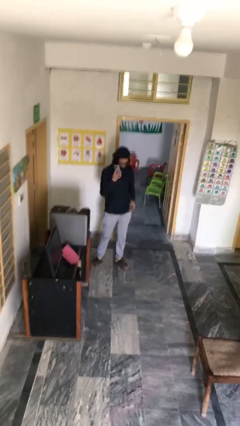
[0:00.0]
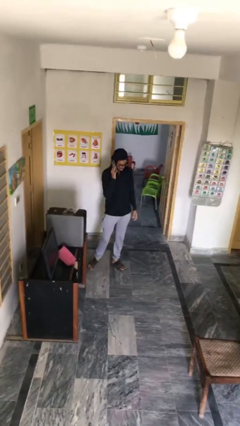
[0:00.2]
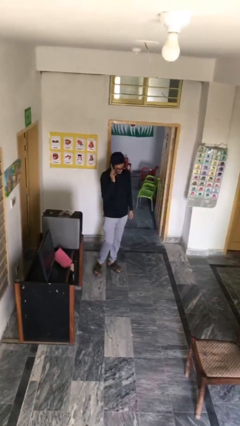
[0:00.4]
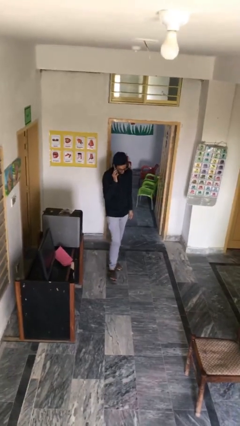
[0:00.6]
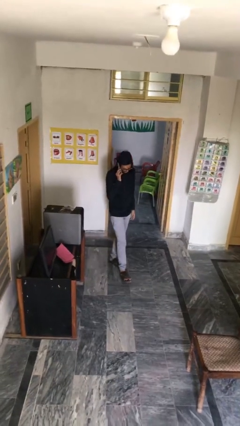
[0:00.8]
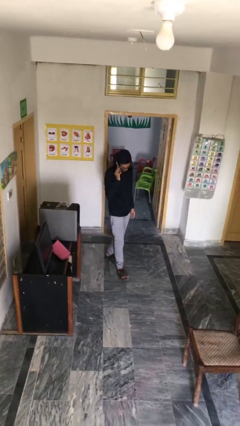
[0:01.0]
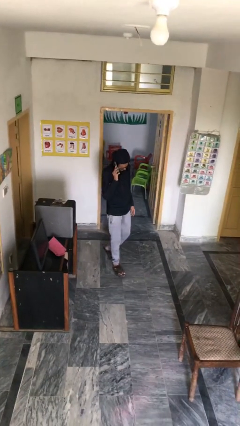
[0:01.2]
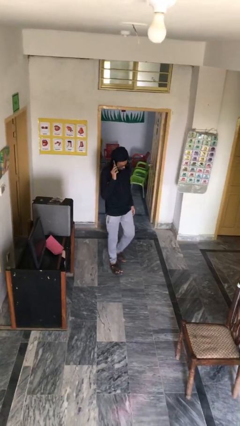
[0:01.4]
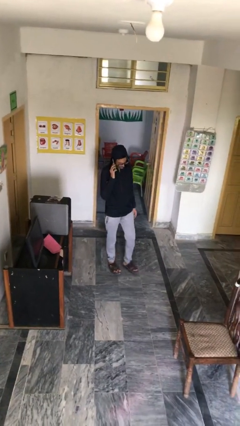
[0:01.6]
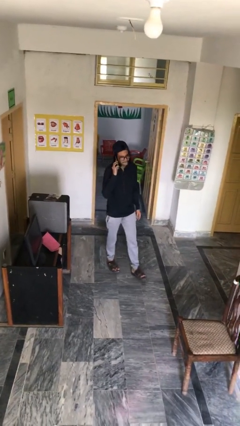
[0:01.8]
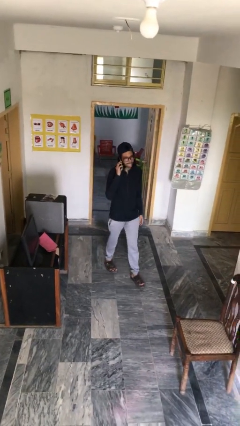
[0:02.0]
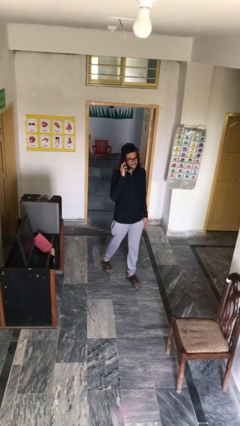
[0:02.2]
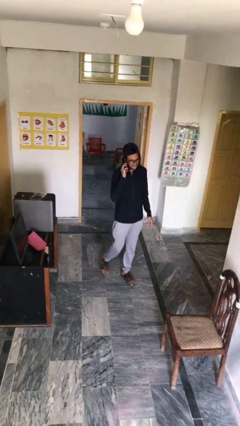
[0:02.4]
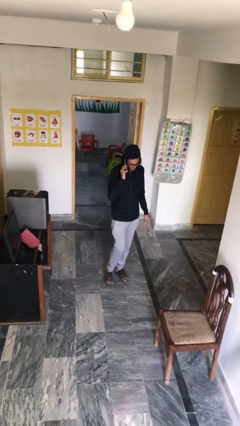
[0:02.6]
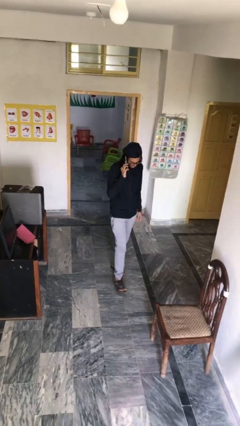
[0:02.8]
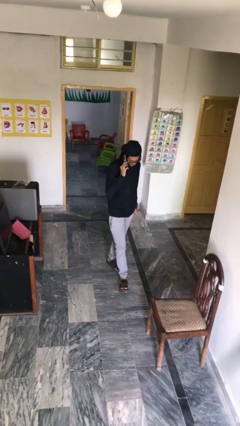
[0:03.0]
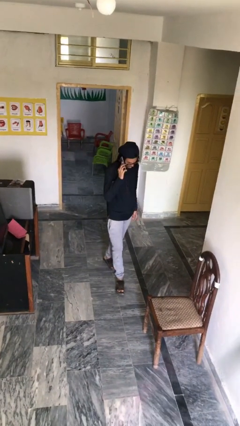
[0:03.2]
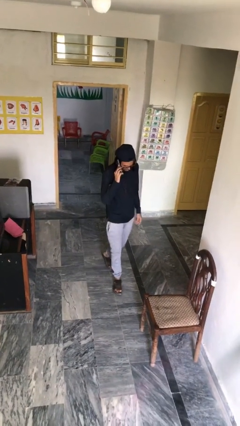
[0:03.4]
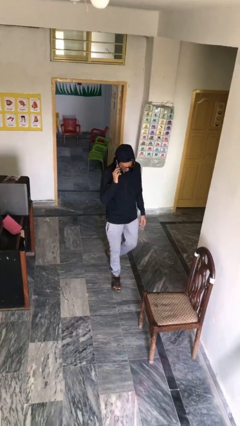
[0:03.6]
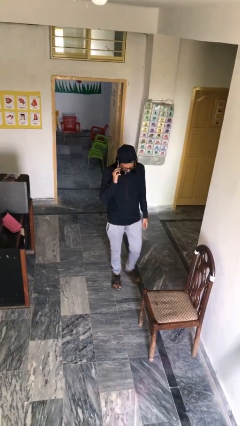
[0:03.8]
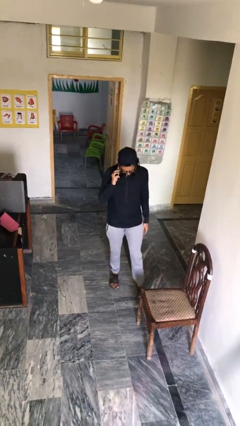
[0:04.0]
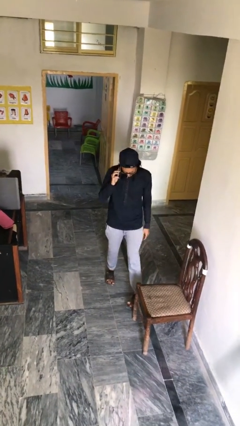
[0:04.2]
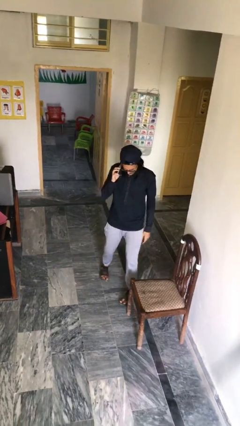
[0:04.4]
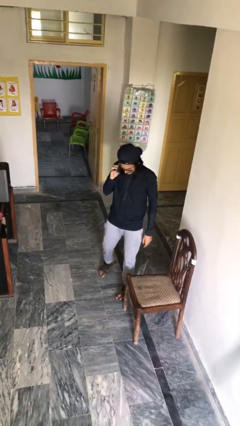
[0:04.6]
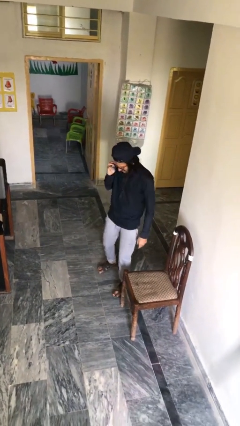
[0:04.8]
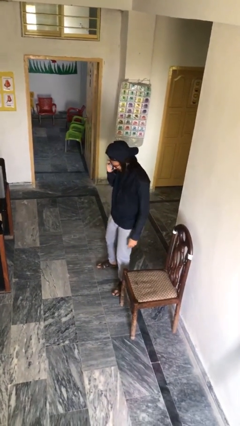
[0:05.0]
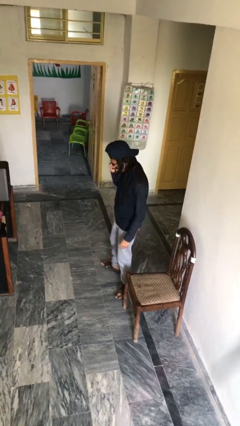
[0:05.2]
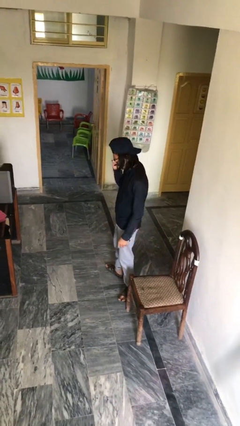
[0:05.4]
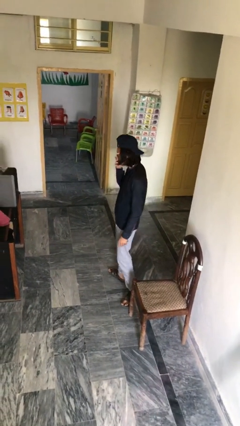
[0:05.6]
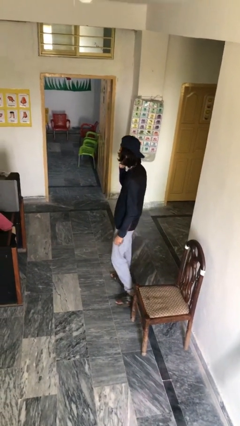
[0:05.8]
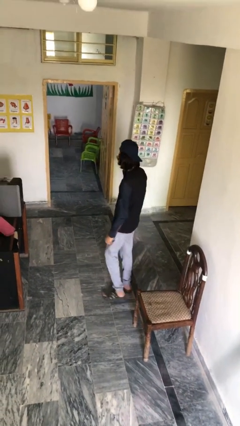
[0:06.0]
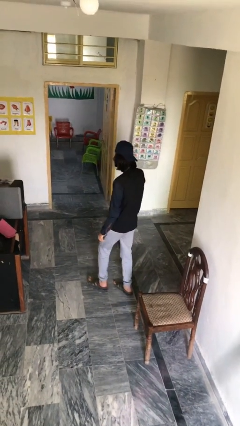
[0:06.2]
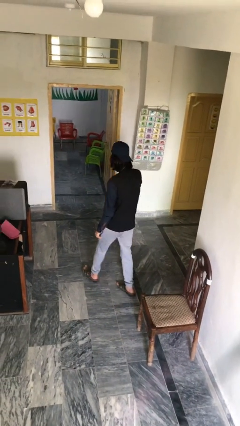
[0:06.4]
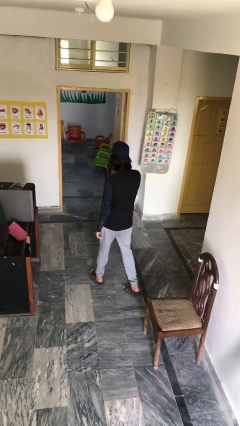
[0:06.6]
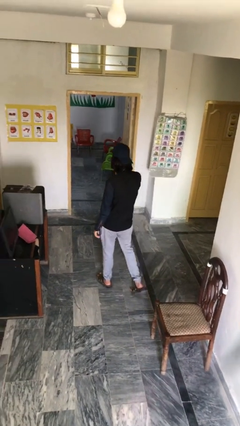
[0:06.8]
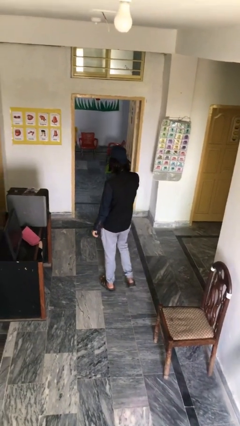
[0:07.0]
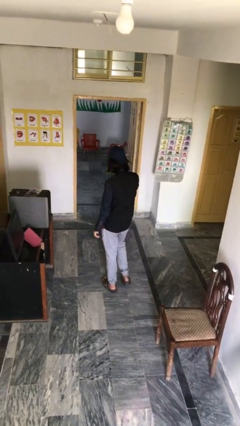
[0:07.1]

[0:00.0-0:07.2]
person talks on phone

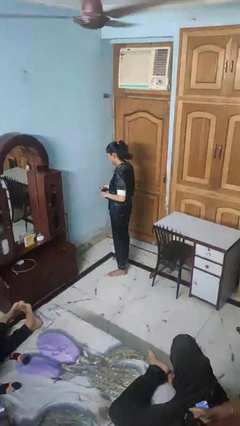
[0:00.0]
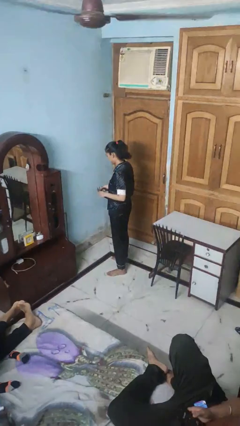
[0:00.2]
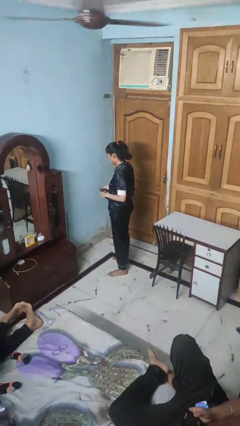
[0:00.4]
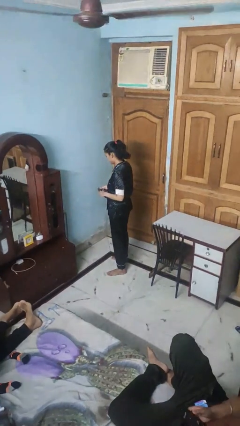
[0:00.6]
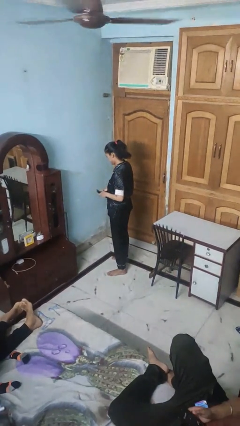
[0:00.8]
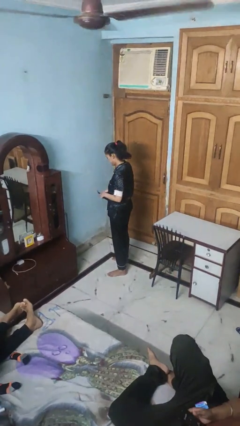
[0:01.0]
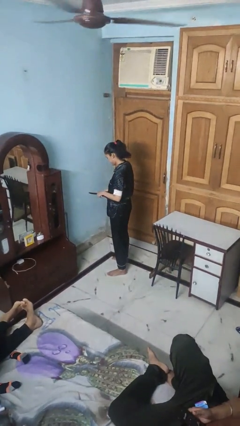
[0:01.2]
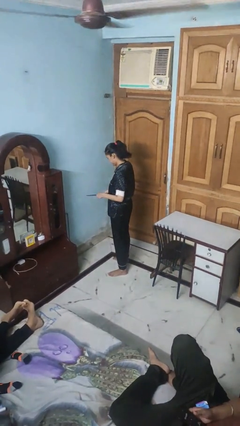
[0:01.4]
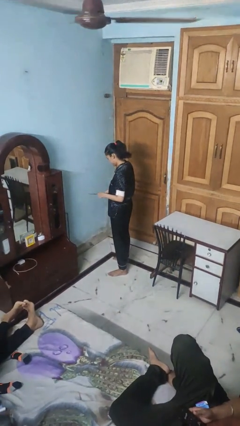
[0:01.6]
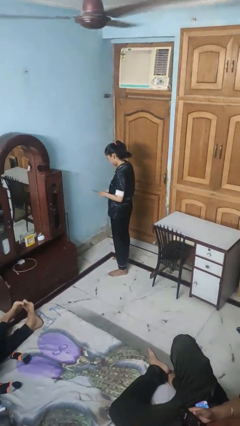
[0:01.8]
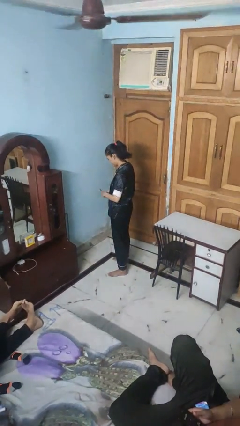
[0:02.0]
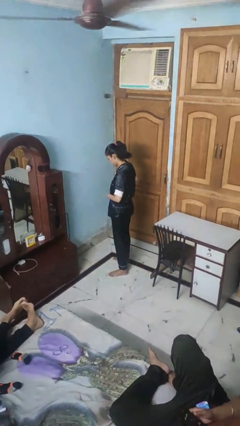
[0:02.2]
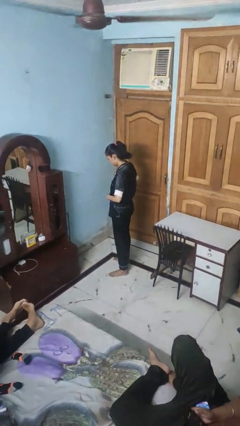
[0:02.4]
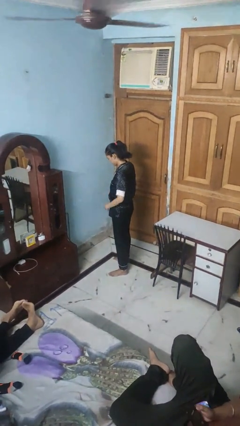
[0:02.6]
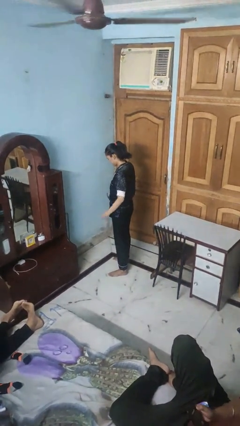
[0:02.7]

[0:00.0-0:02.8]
person puts on belt

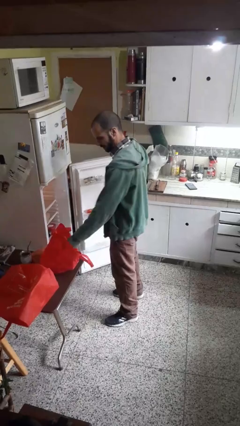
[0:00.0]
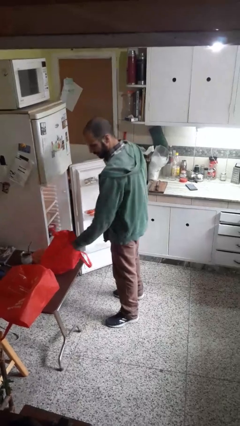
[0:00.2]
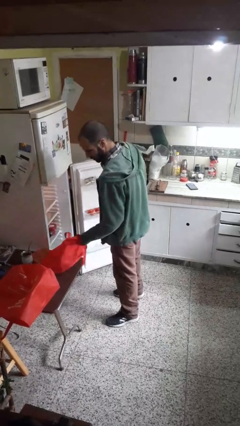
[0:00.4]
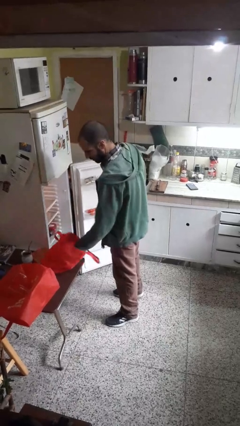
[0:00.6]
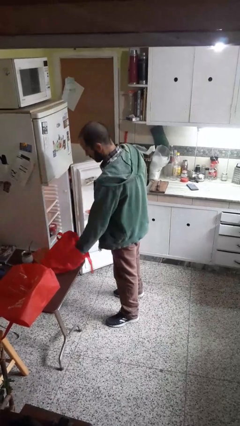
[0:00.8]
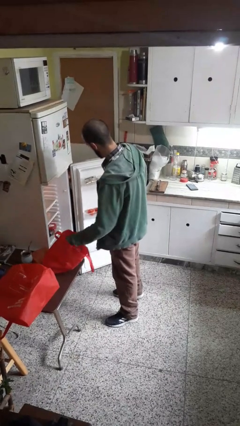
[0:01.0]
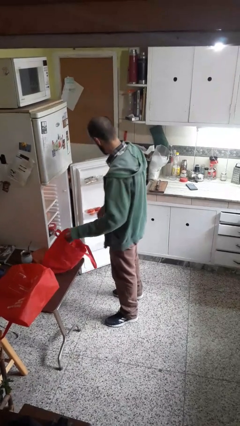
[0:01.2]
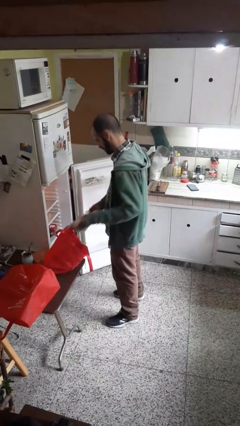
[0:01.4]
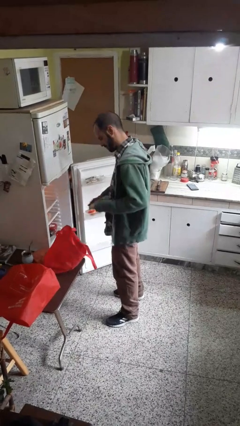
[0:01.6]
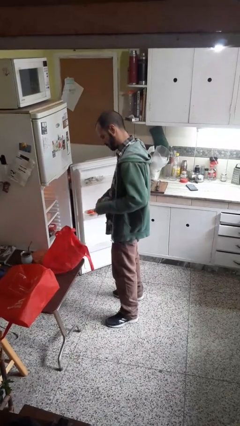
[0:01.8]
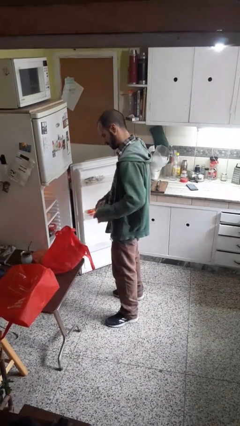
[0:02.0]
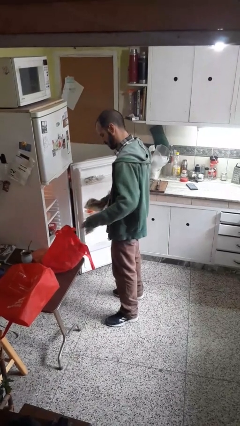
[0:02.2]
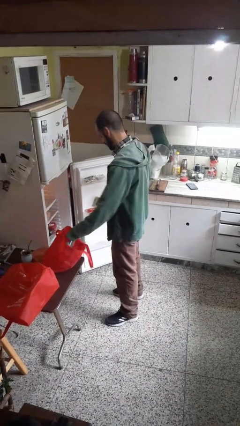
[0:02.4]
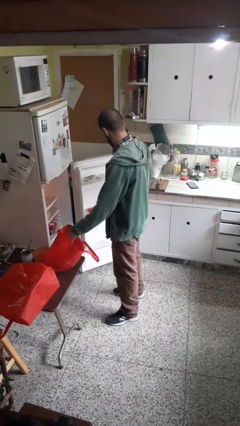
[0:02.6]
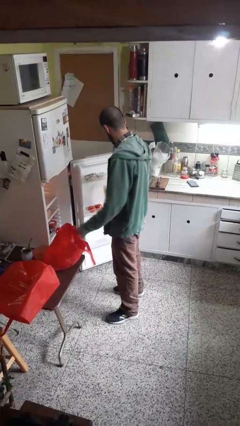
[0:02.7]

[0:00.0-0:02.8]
person loads groceries into refrigerator

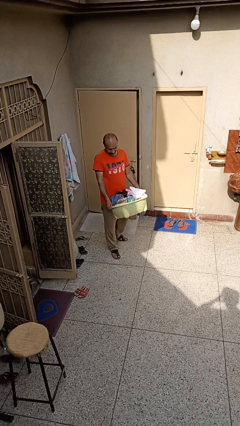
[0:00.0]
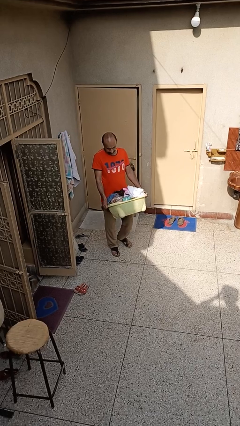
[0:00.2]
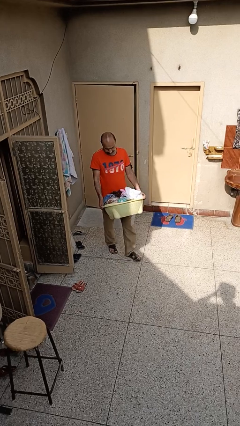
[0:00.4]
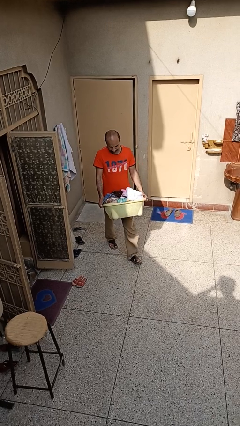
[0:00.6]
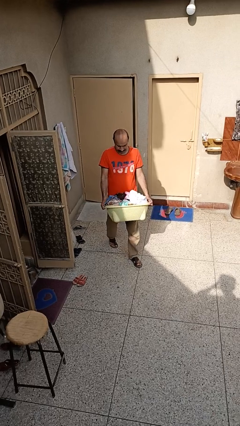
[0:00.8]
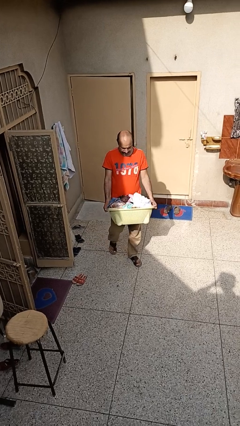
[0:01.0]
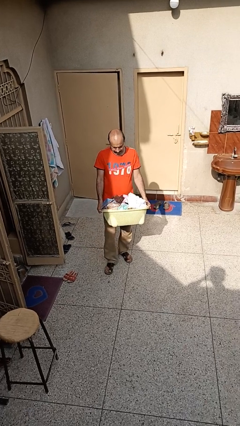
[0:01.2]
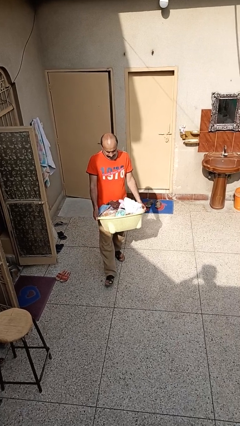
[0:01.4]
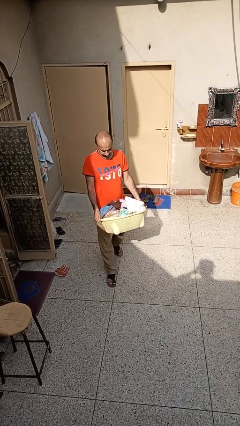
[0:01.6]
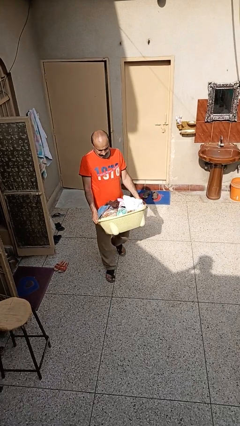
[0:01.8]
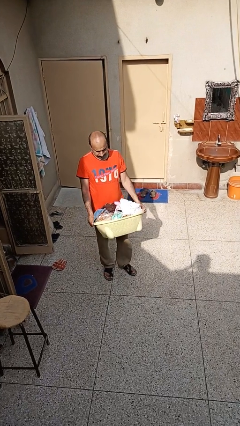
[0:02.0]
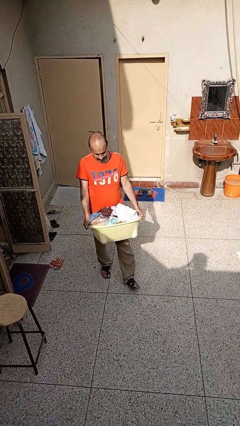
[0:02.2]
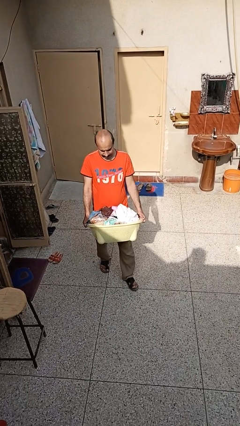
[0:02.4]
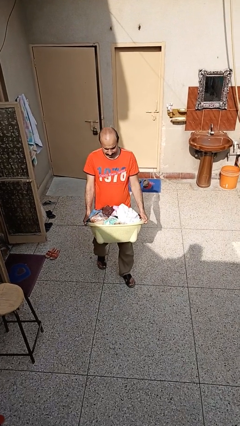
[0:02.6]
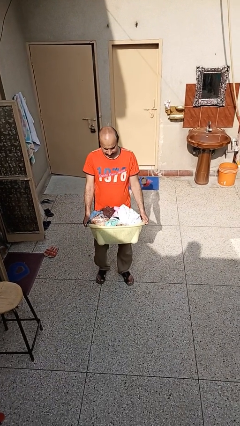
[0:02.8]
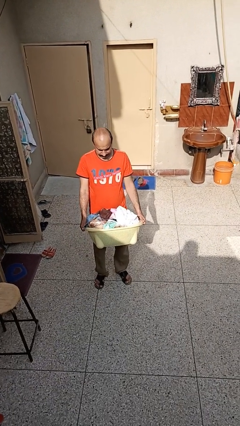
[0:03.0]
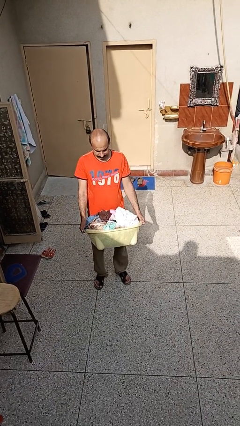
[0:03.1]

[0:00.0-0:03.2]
person carries laundry basket

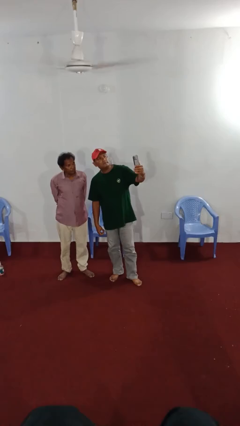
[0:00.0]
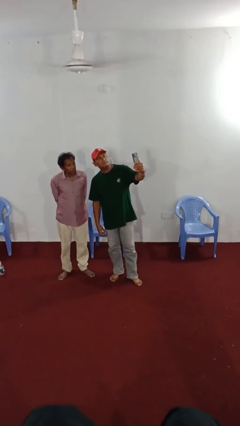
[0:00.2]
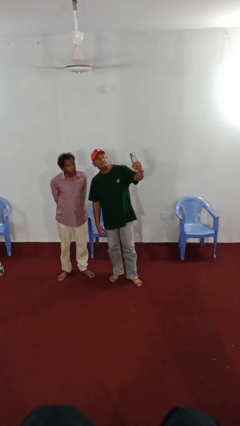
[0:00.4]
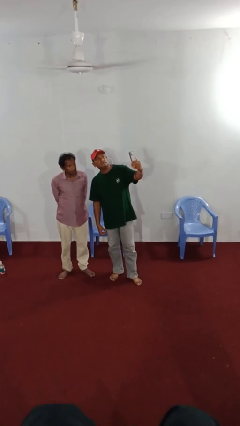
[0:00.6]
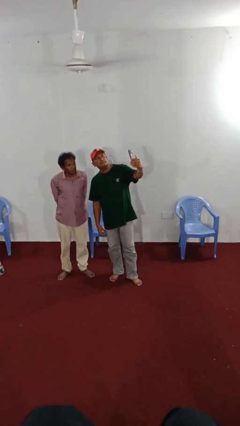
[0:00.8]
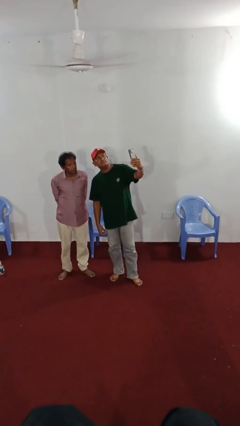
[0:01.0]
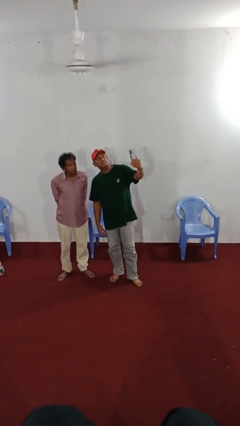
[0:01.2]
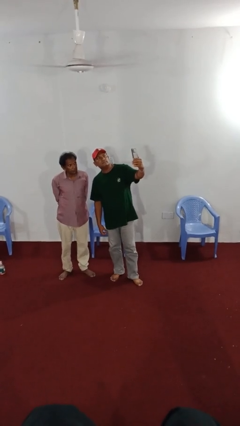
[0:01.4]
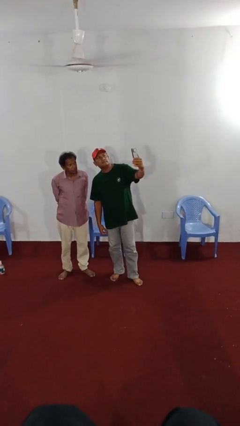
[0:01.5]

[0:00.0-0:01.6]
person takes selfie with person

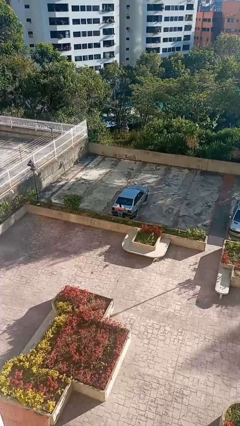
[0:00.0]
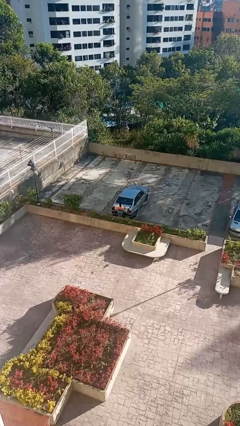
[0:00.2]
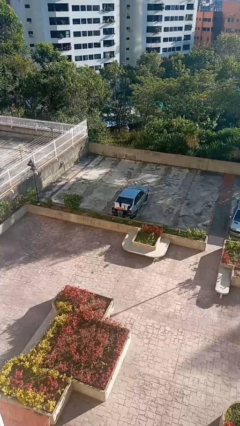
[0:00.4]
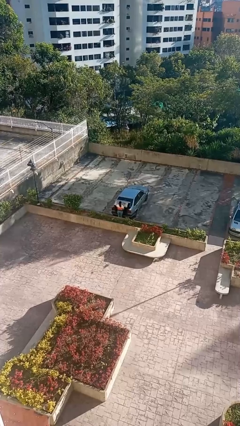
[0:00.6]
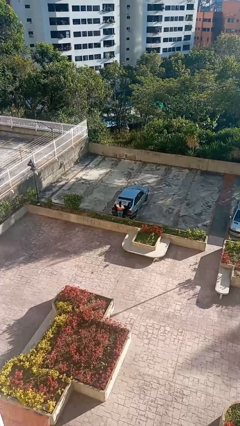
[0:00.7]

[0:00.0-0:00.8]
person opens car trunk
